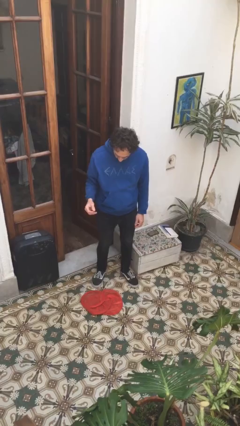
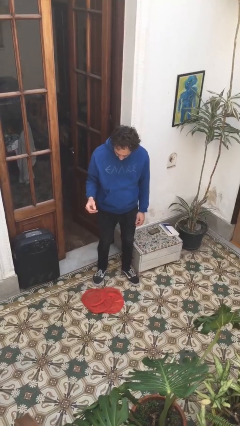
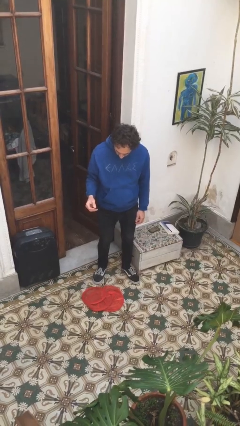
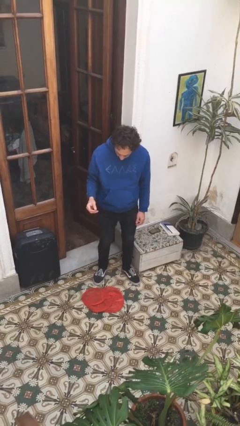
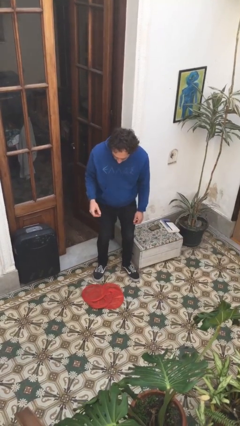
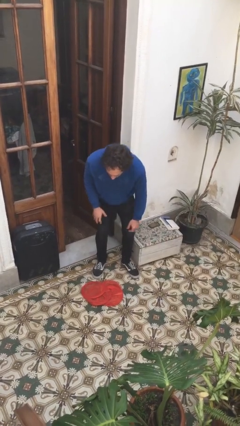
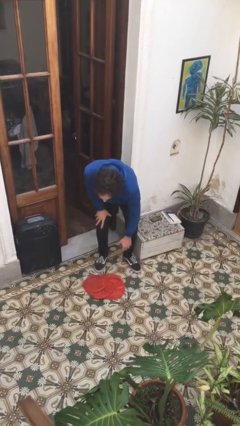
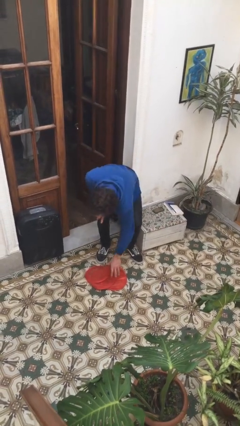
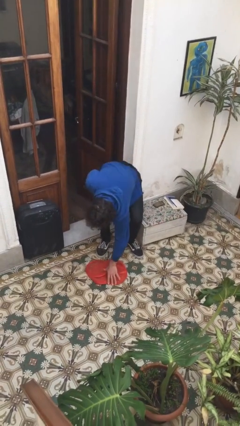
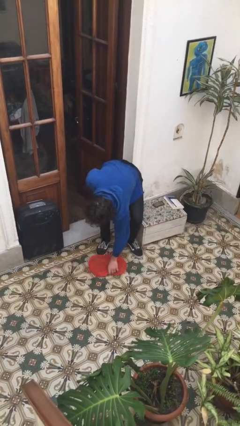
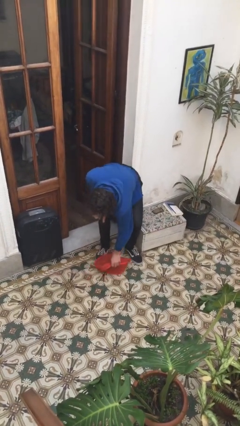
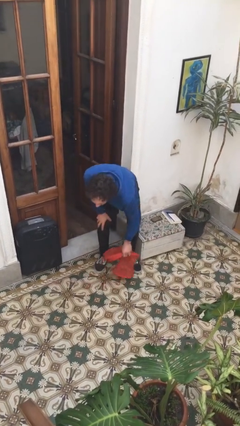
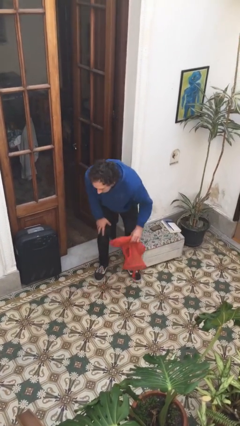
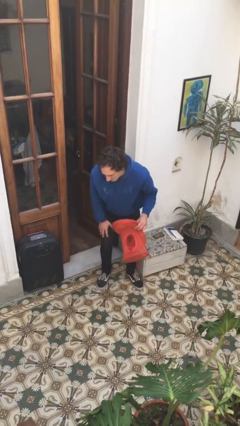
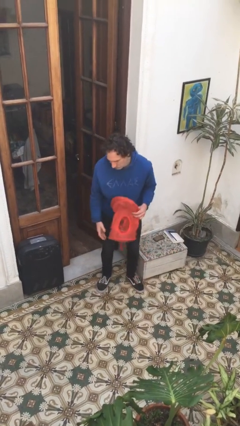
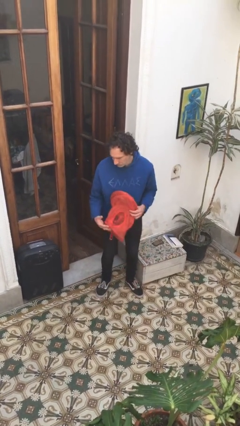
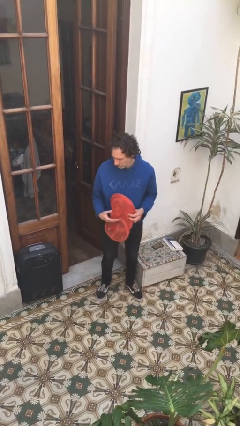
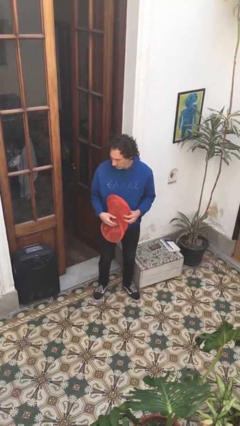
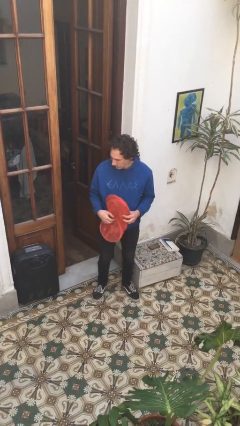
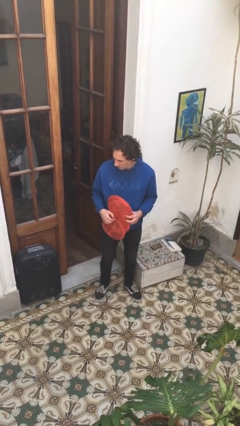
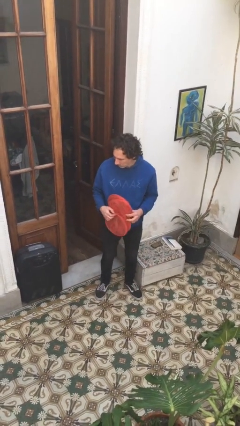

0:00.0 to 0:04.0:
person picks up object from floor

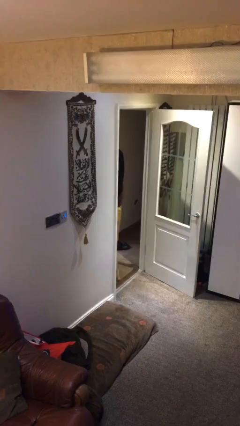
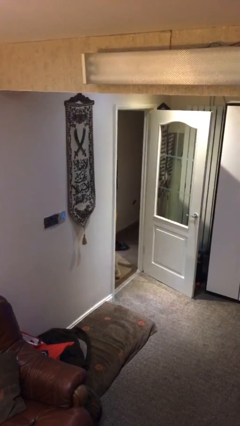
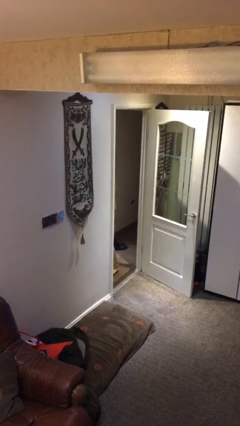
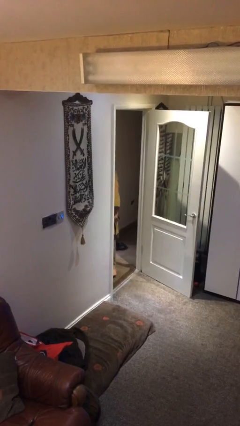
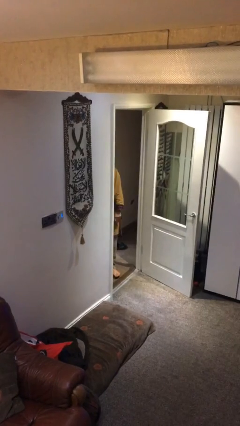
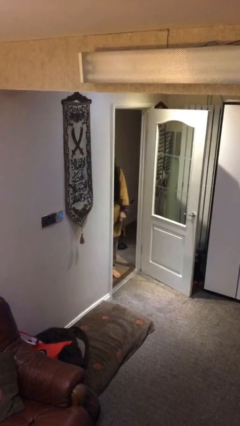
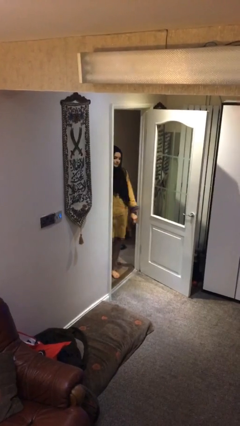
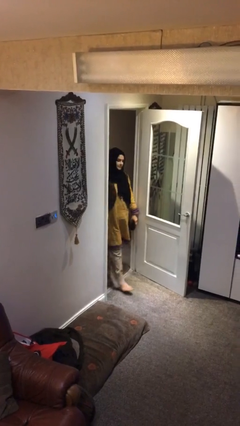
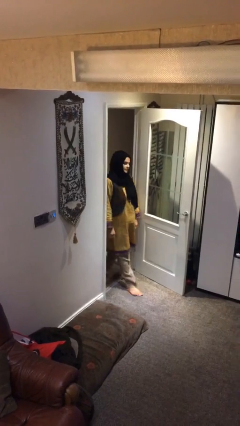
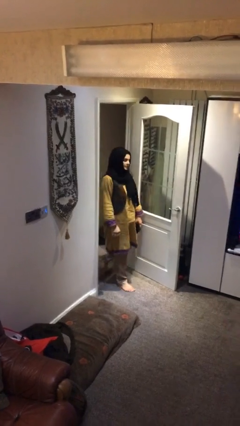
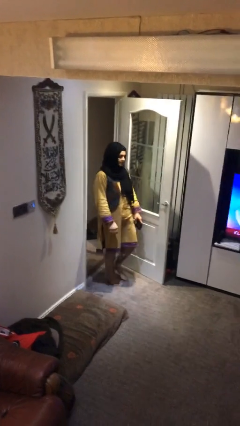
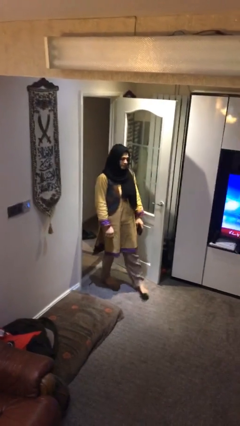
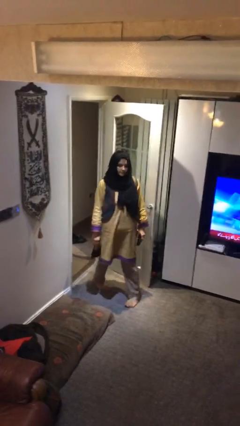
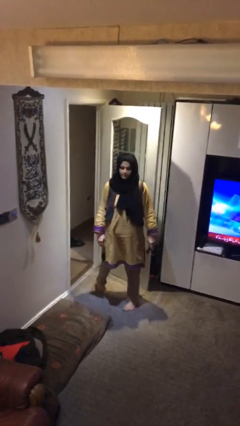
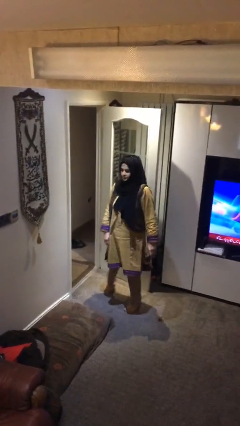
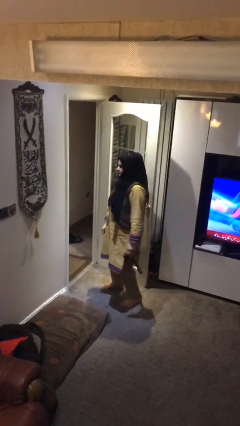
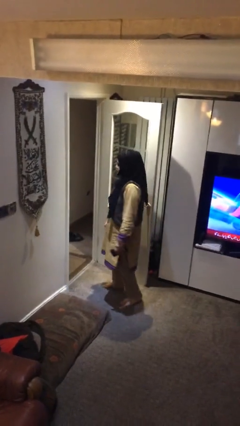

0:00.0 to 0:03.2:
person enters scene through structure

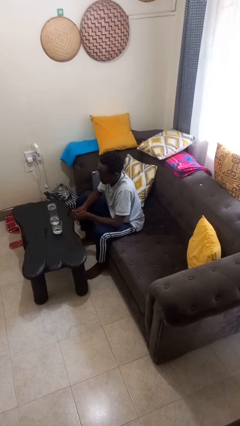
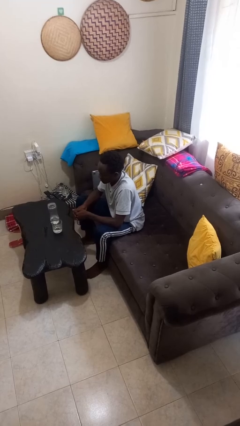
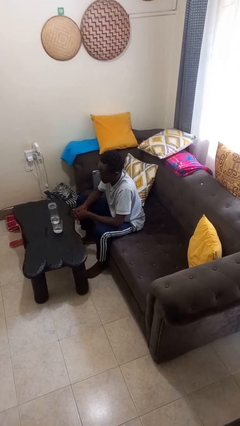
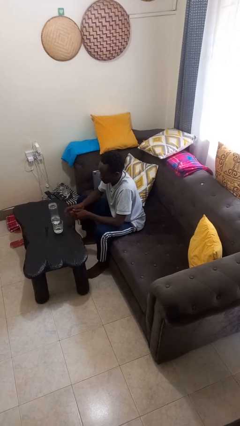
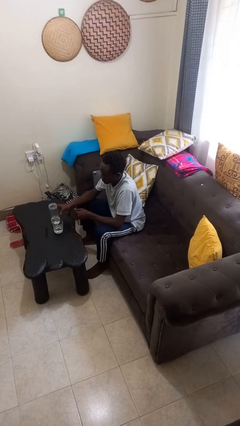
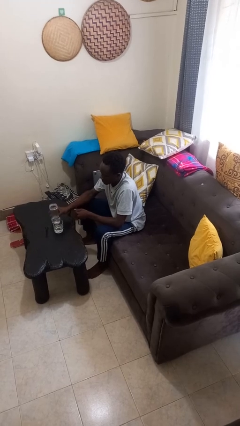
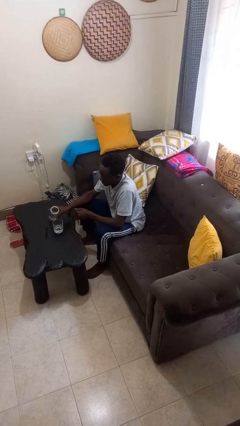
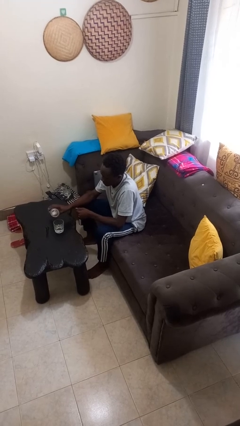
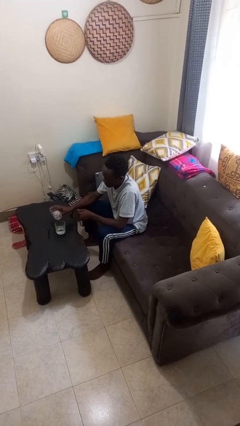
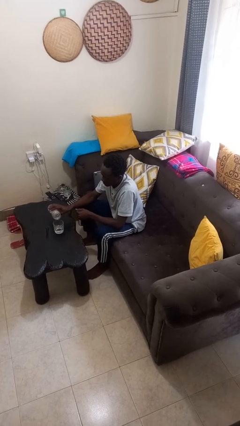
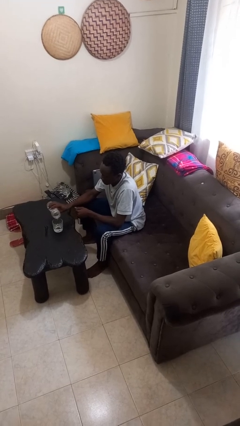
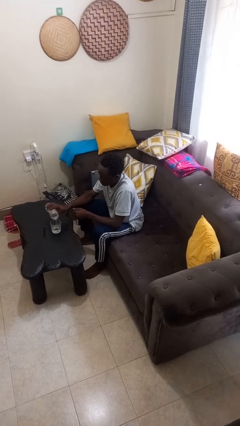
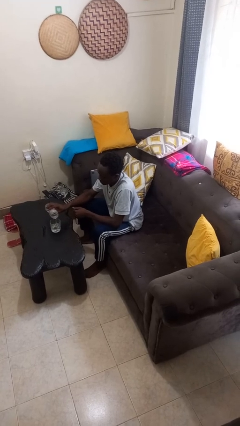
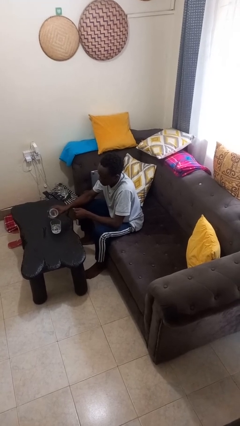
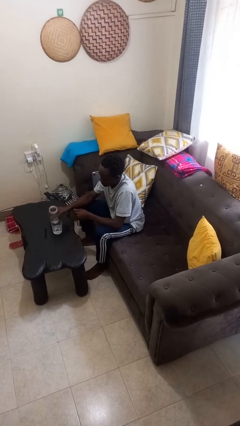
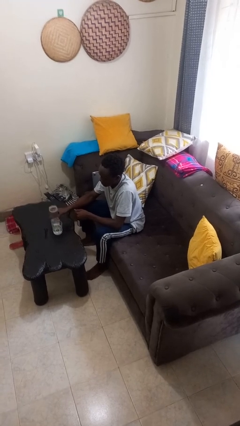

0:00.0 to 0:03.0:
person pours liquid into cup

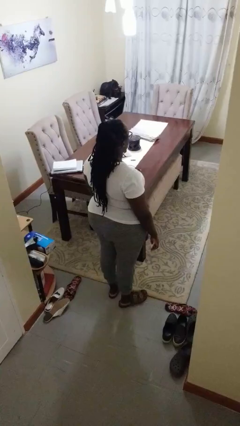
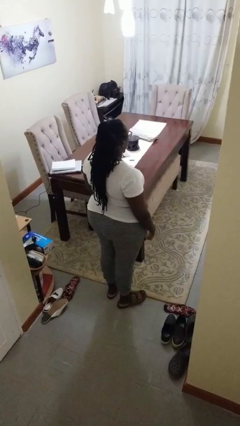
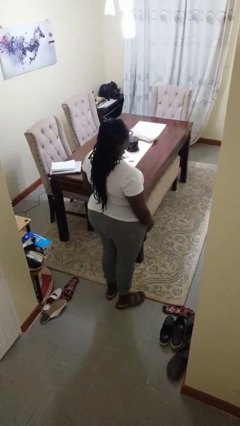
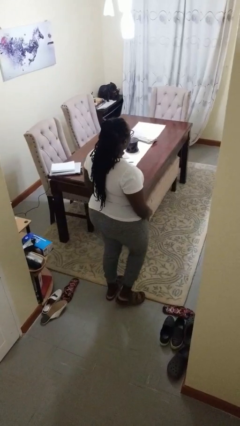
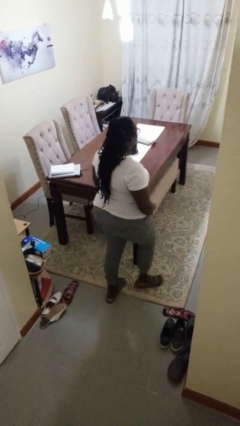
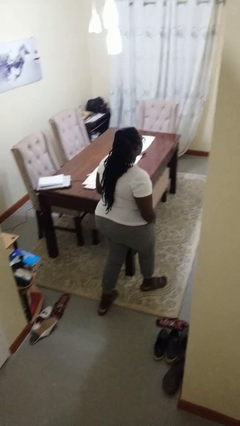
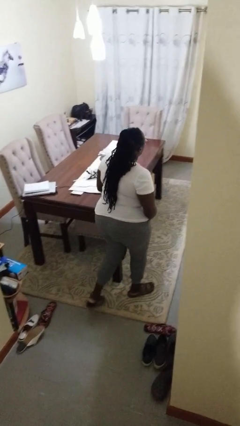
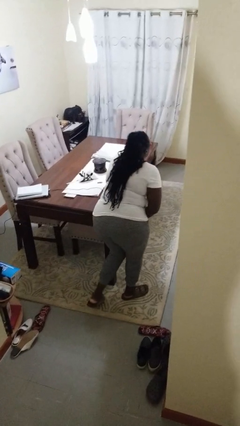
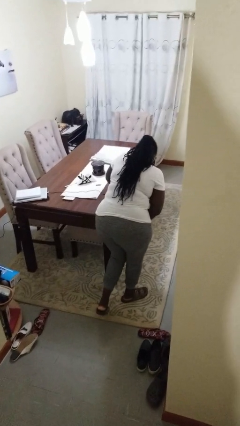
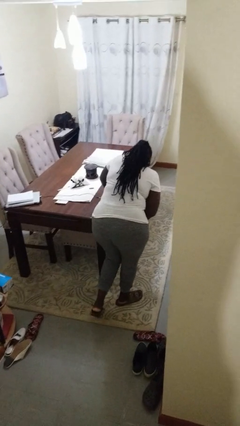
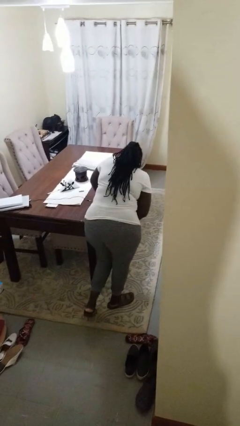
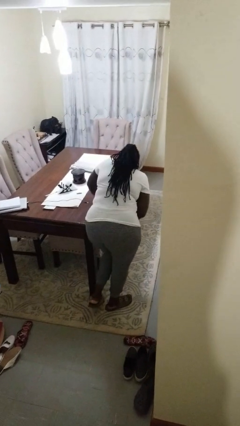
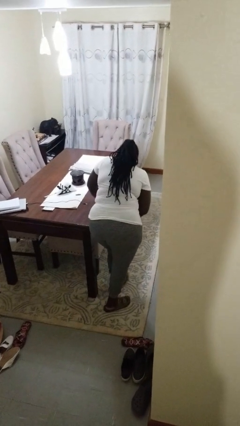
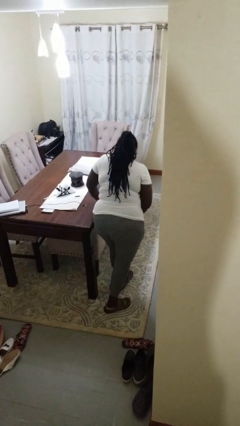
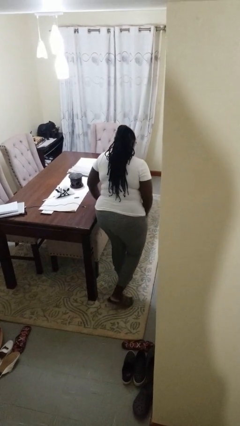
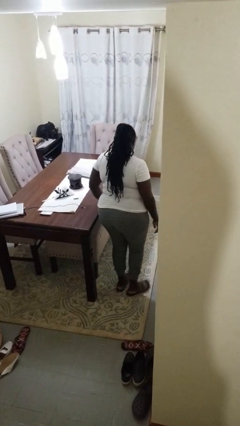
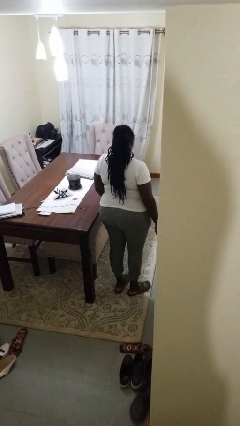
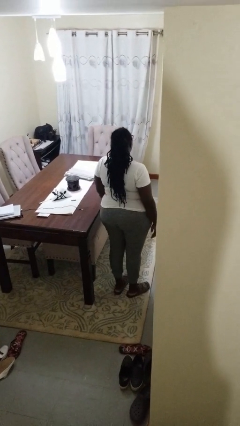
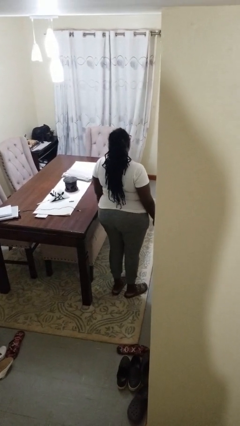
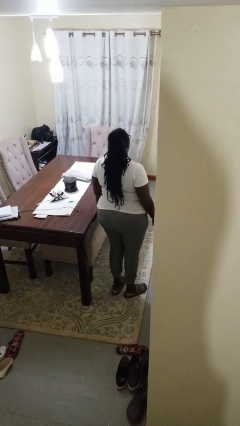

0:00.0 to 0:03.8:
person bumps into table

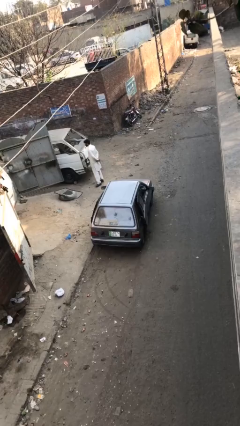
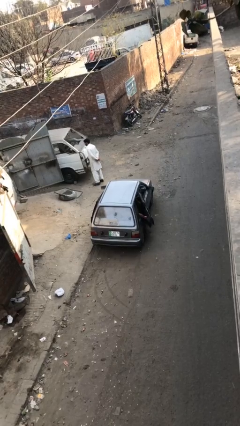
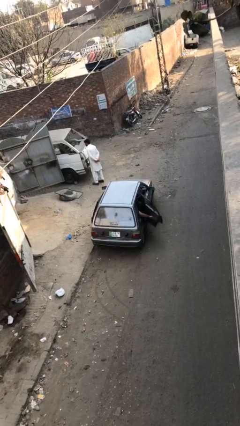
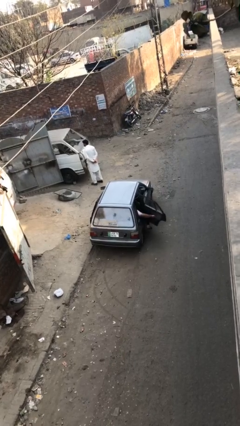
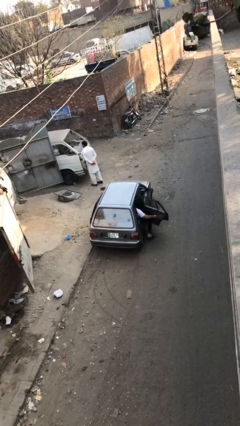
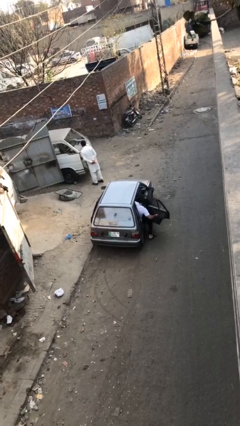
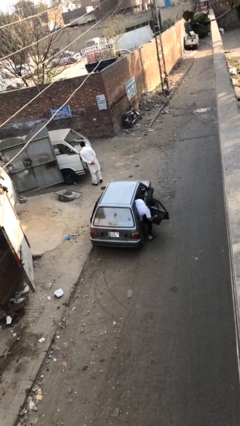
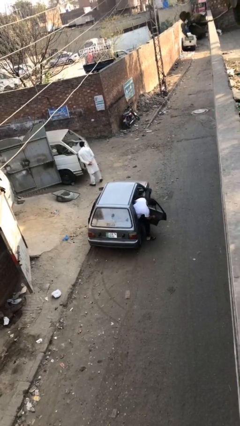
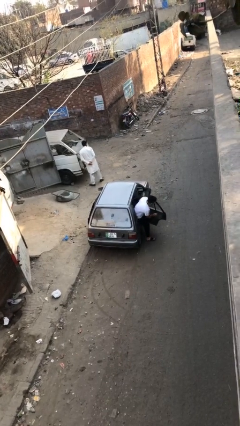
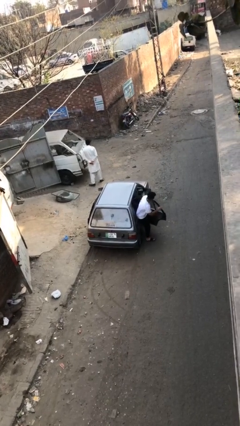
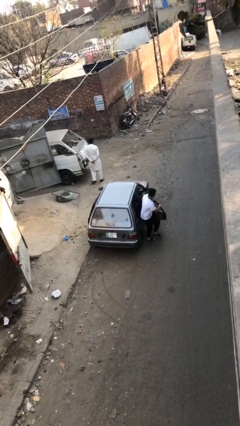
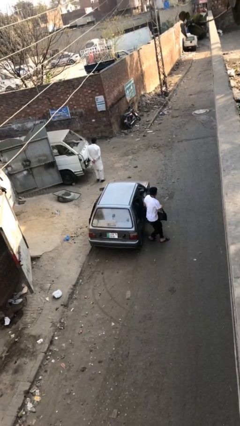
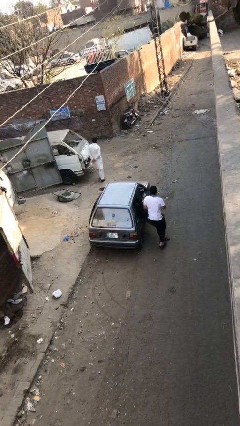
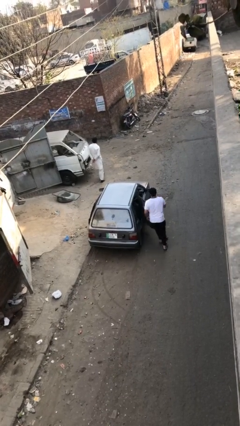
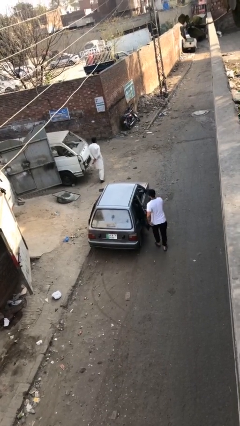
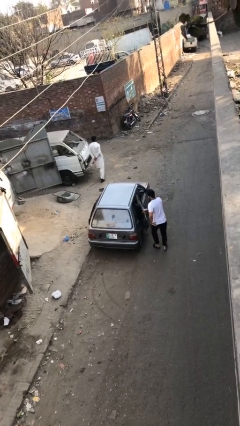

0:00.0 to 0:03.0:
car drops off person

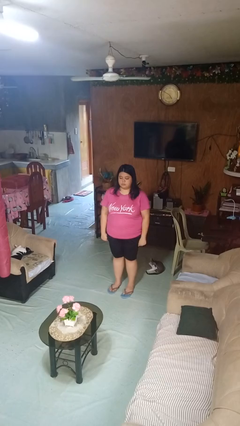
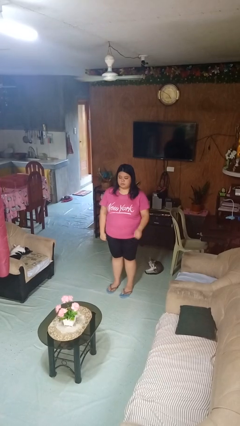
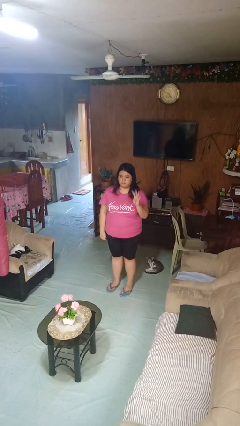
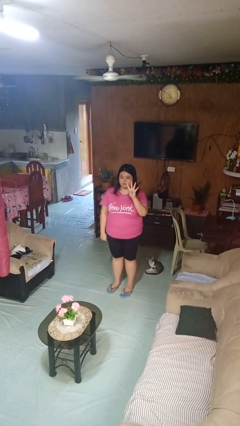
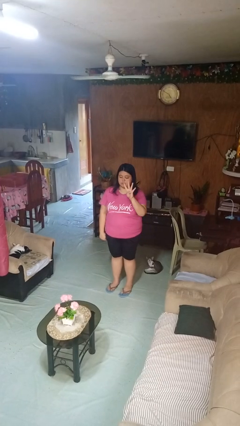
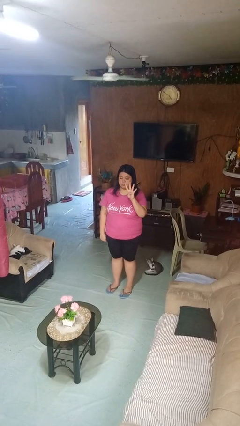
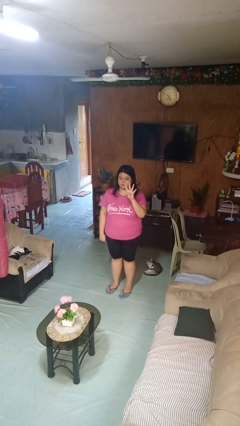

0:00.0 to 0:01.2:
person gestures number four
